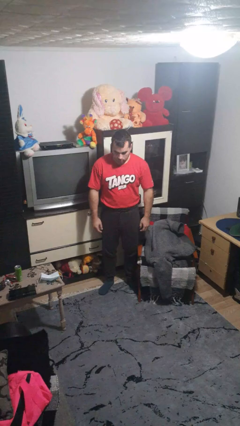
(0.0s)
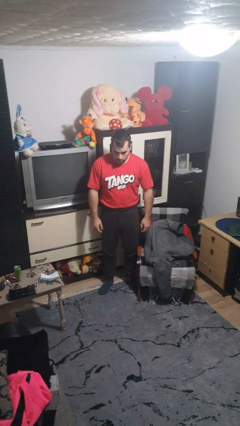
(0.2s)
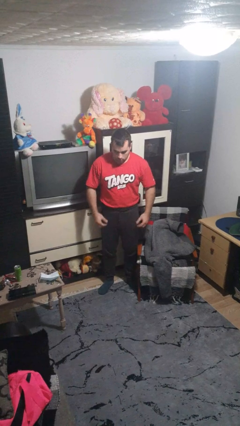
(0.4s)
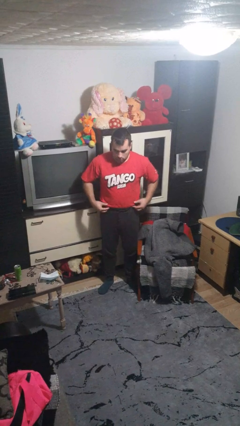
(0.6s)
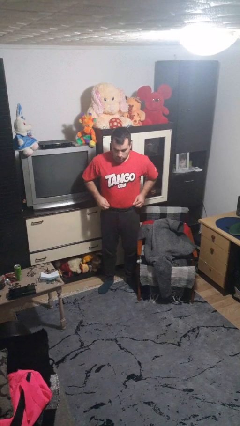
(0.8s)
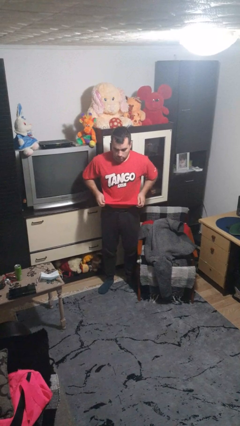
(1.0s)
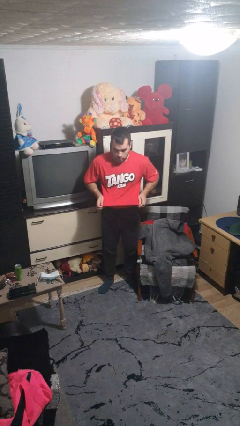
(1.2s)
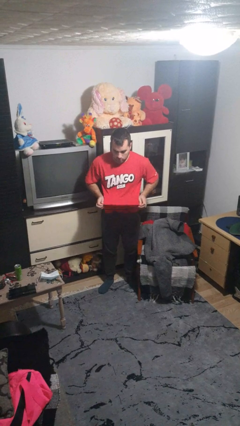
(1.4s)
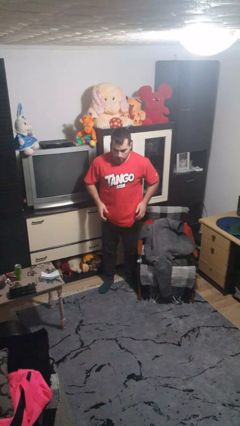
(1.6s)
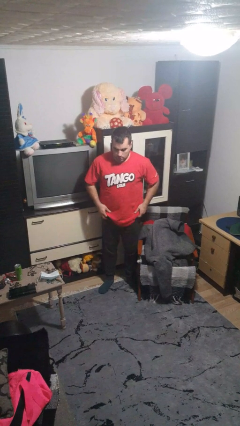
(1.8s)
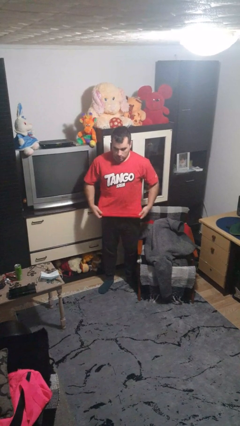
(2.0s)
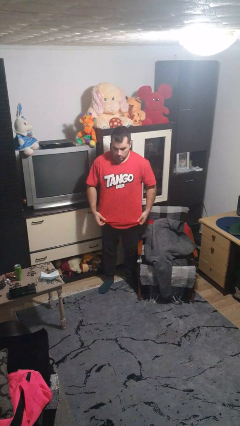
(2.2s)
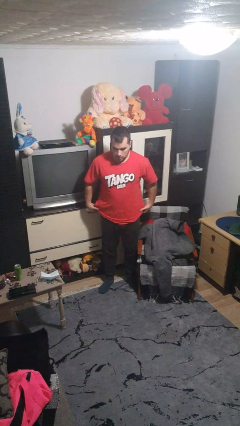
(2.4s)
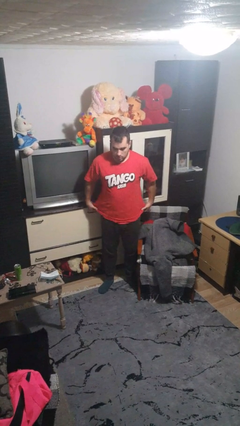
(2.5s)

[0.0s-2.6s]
person untucks shirt

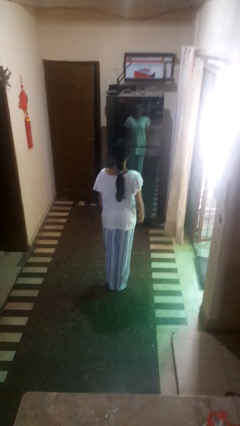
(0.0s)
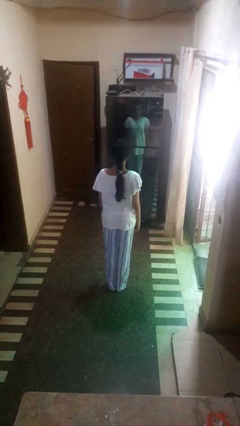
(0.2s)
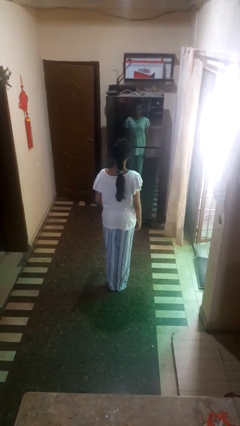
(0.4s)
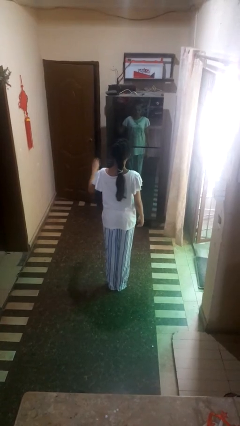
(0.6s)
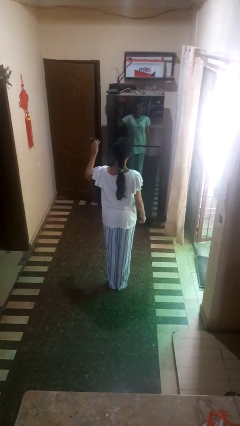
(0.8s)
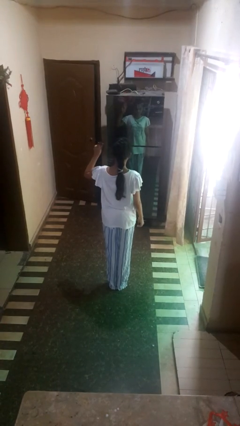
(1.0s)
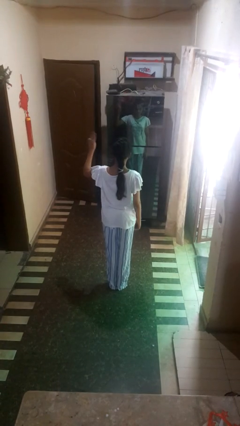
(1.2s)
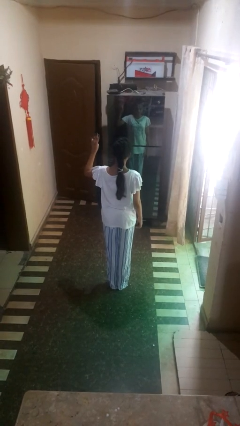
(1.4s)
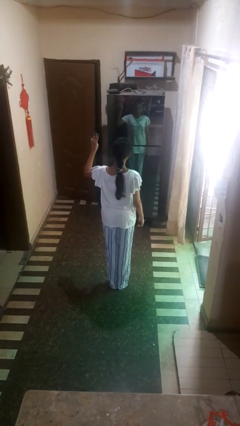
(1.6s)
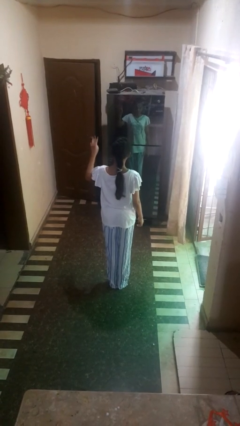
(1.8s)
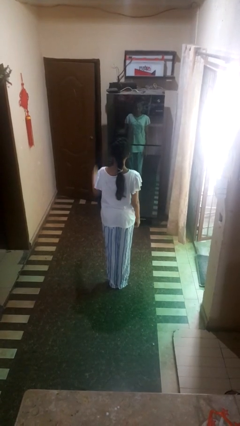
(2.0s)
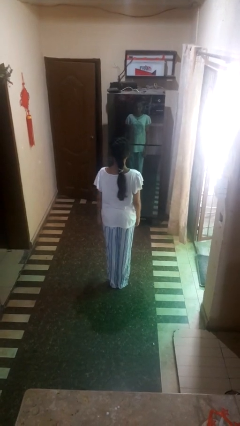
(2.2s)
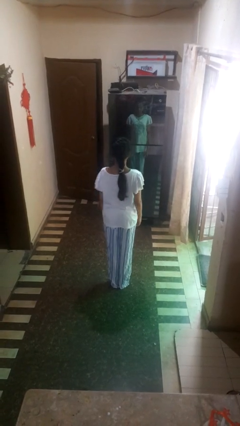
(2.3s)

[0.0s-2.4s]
person gestures number three

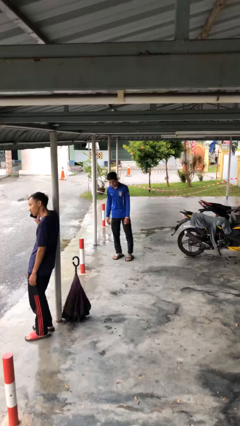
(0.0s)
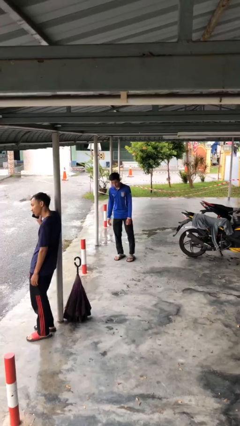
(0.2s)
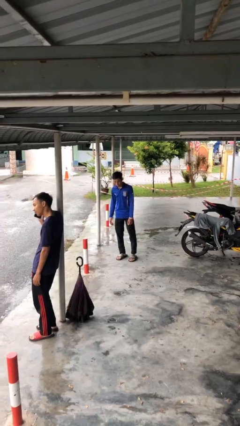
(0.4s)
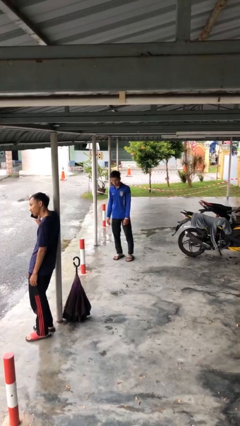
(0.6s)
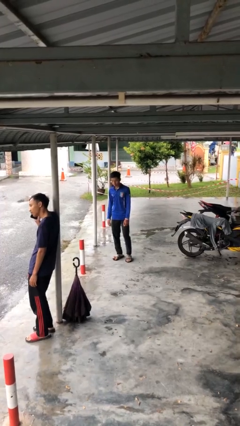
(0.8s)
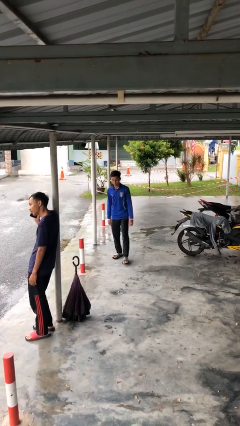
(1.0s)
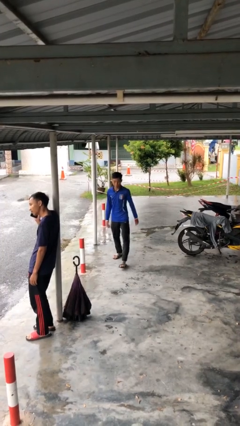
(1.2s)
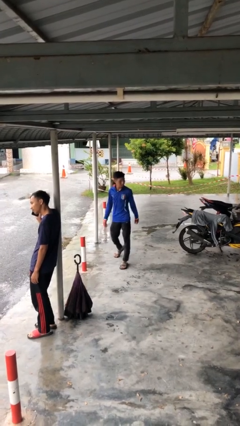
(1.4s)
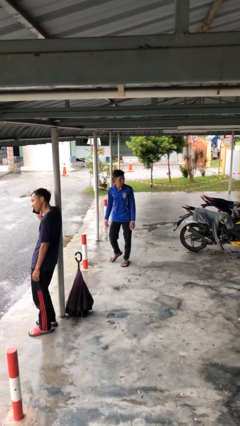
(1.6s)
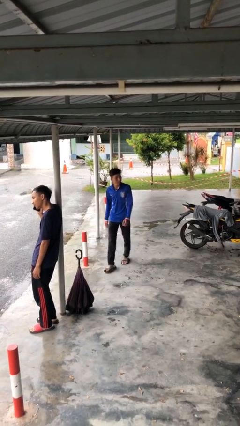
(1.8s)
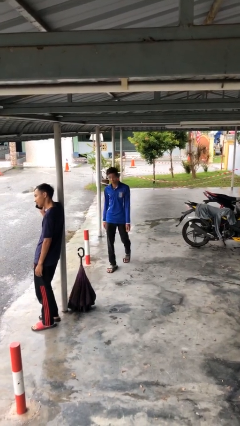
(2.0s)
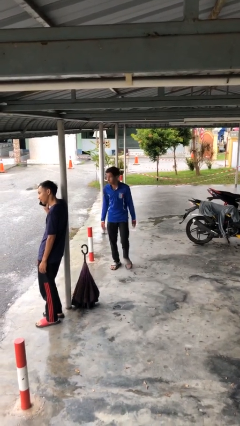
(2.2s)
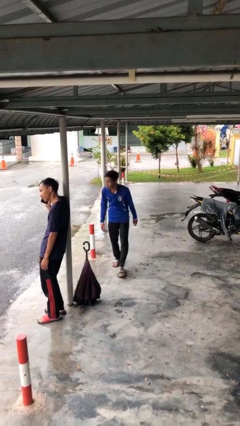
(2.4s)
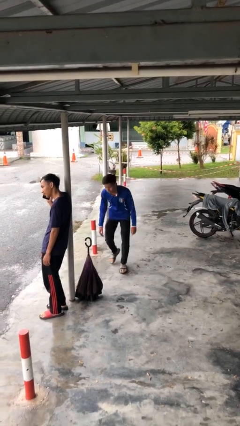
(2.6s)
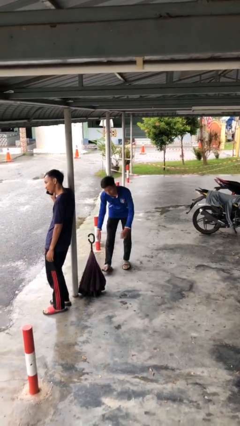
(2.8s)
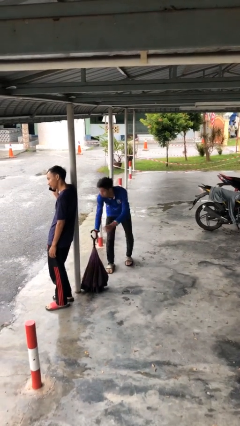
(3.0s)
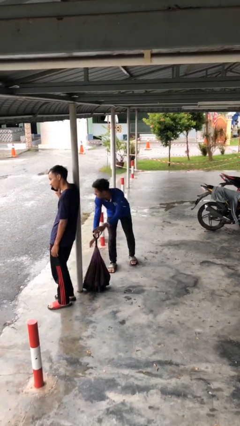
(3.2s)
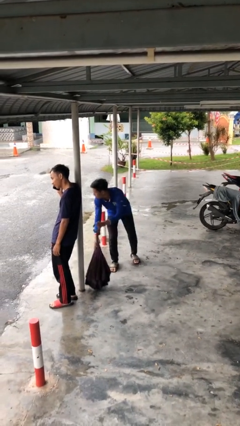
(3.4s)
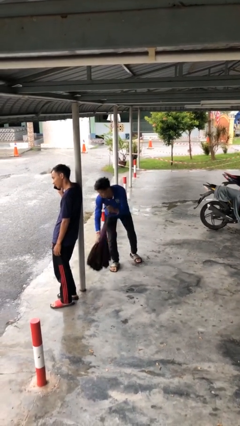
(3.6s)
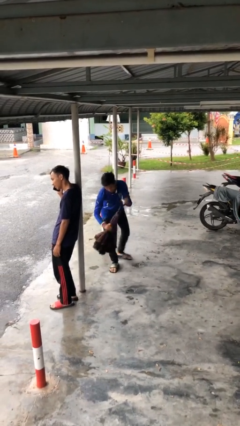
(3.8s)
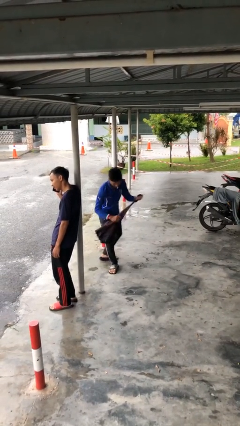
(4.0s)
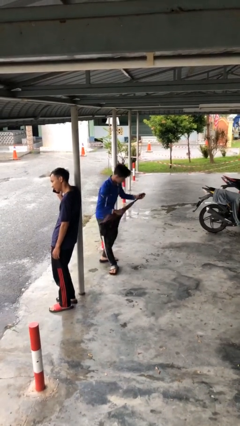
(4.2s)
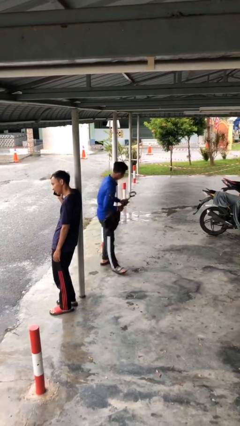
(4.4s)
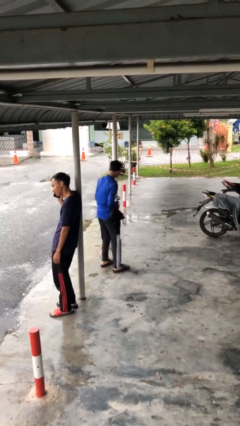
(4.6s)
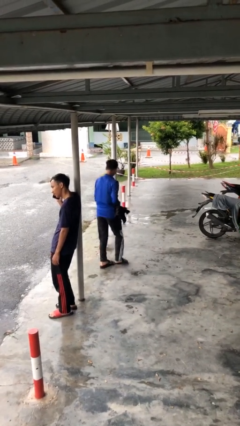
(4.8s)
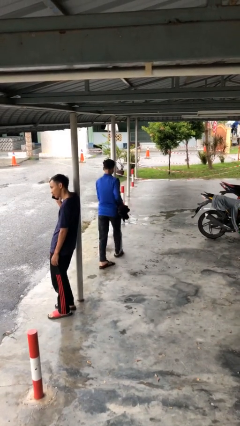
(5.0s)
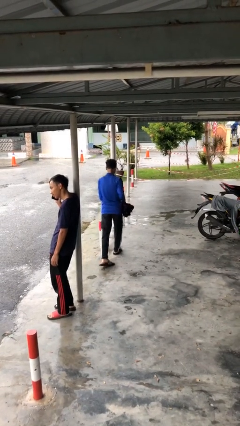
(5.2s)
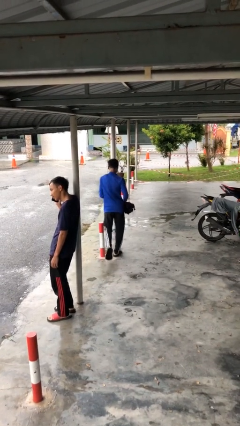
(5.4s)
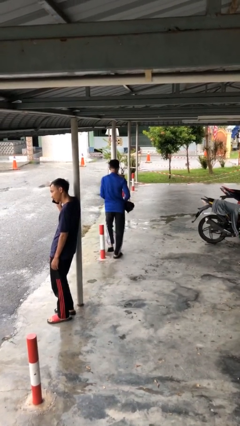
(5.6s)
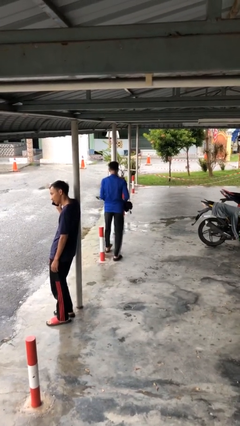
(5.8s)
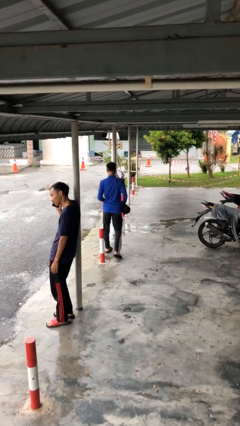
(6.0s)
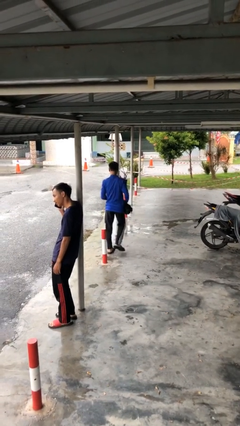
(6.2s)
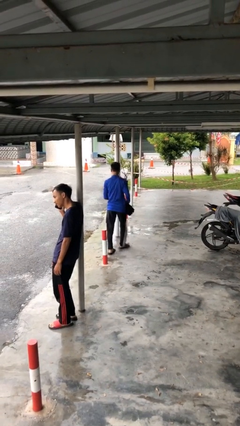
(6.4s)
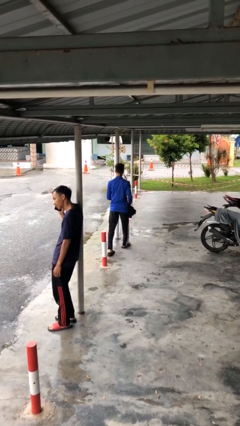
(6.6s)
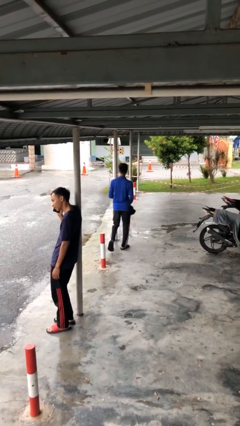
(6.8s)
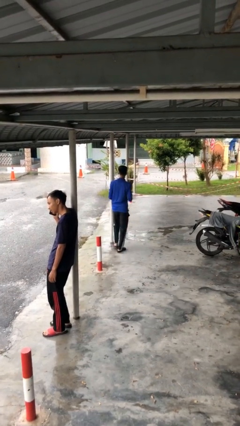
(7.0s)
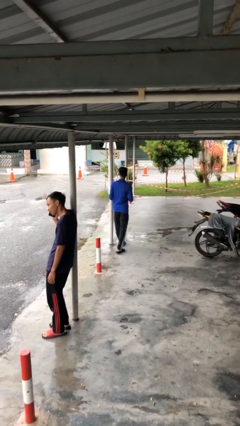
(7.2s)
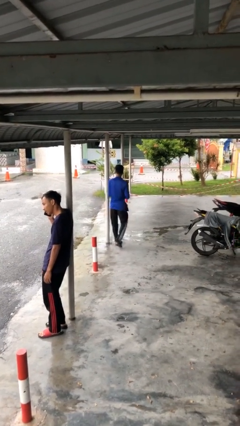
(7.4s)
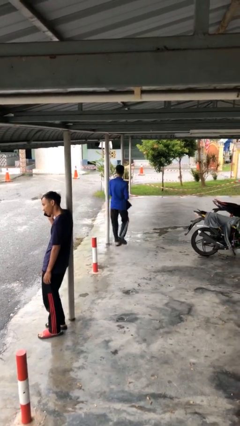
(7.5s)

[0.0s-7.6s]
person steals object from person

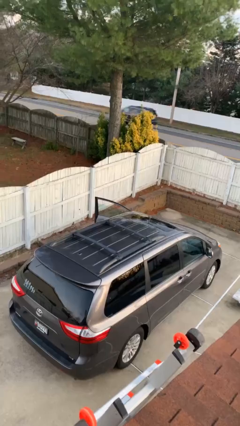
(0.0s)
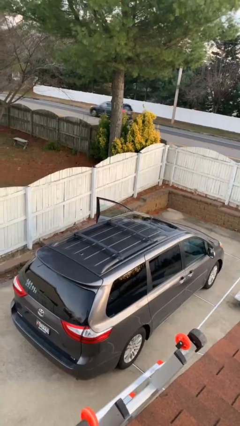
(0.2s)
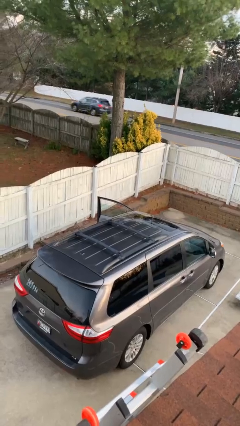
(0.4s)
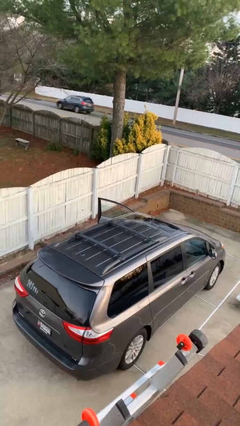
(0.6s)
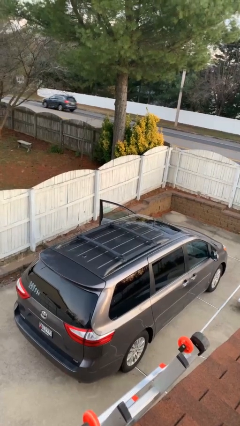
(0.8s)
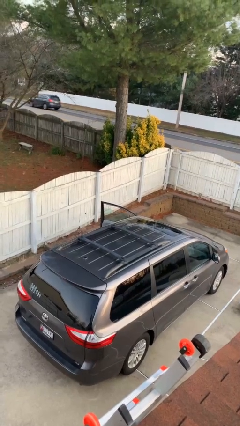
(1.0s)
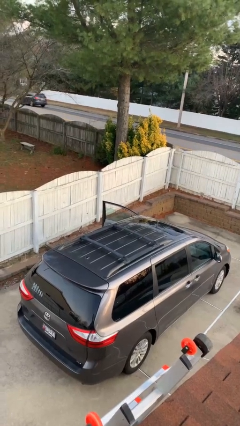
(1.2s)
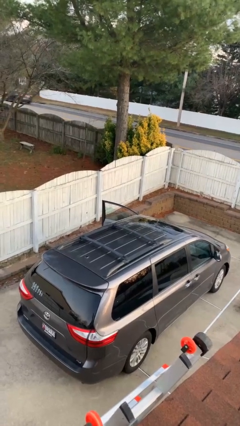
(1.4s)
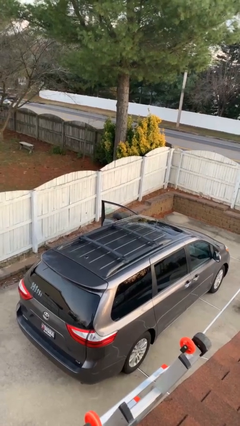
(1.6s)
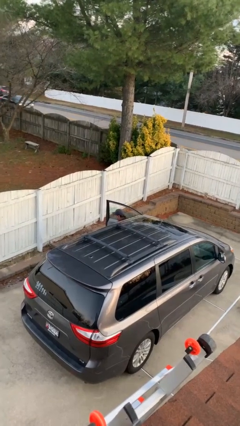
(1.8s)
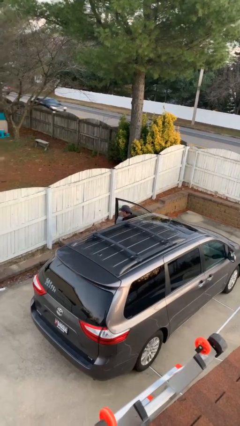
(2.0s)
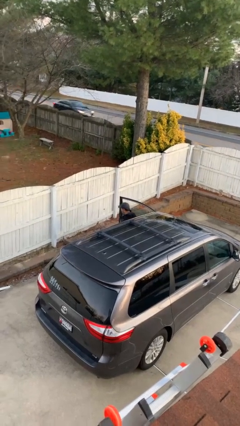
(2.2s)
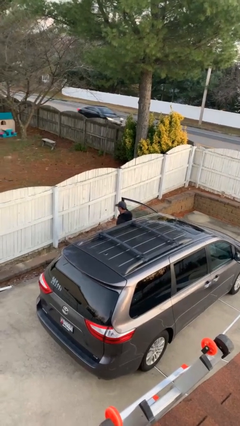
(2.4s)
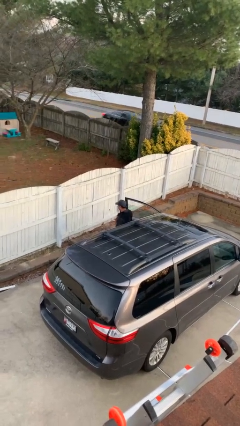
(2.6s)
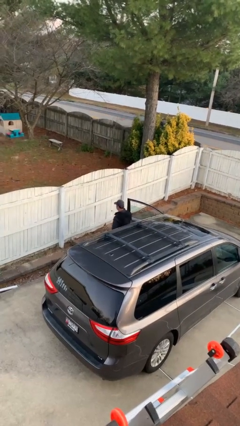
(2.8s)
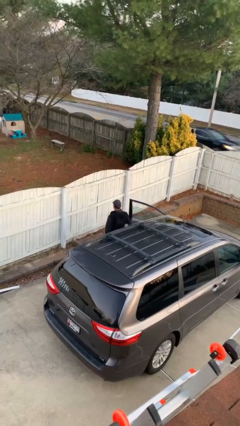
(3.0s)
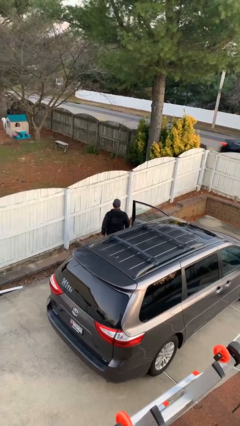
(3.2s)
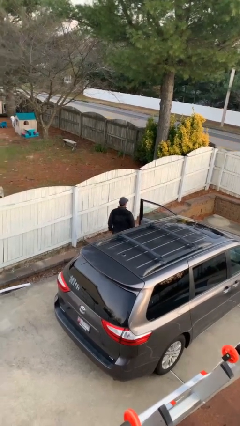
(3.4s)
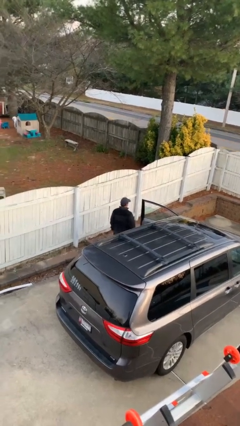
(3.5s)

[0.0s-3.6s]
person exits car

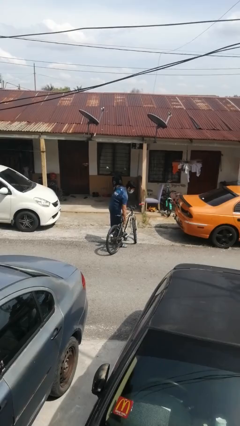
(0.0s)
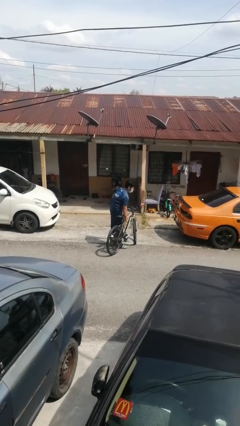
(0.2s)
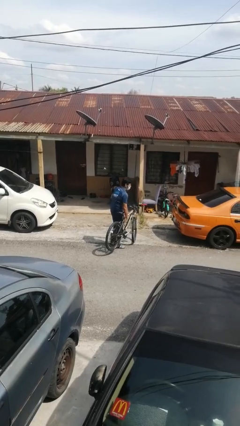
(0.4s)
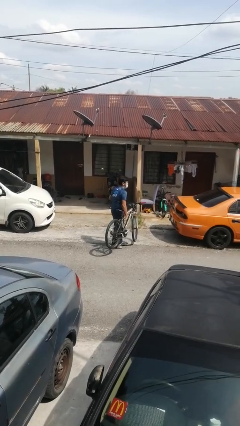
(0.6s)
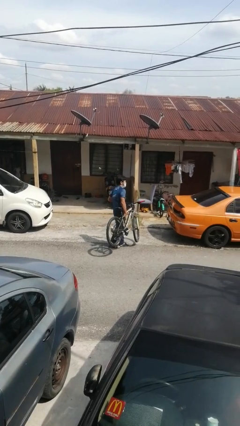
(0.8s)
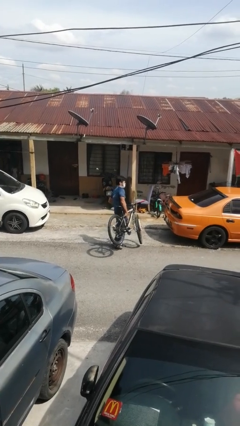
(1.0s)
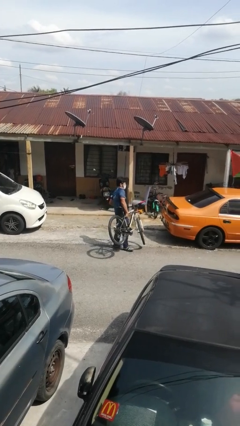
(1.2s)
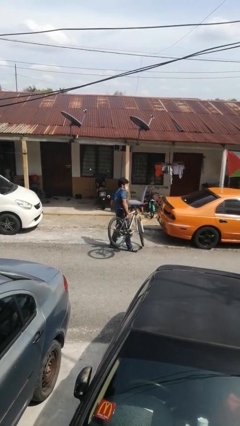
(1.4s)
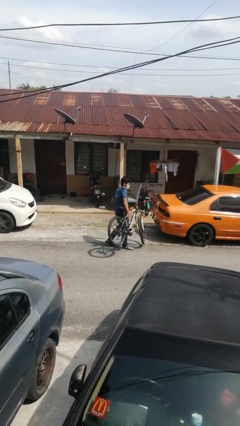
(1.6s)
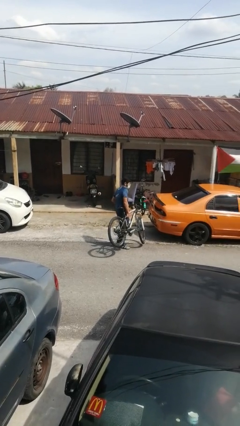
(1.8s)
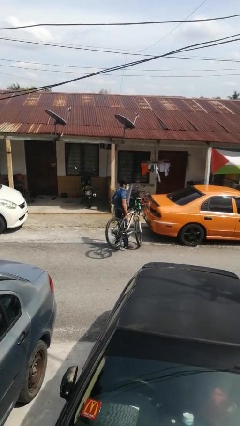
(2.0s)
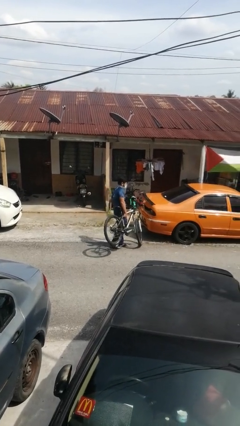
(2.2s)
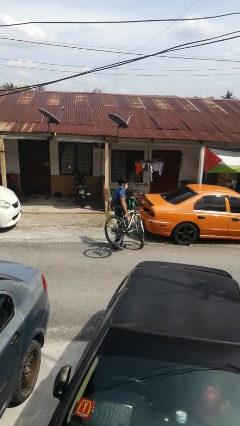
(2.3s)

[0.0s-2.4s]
person carries bicycle
